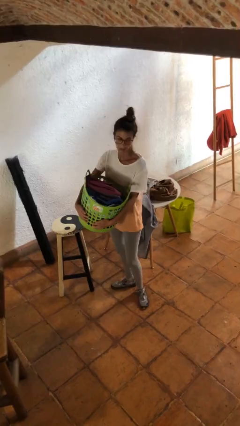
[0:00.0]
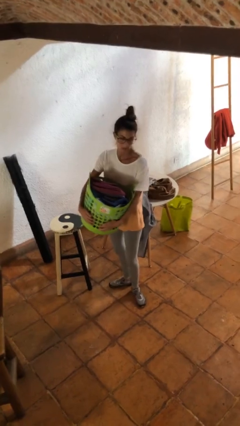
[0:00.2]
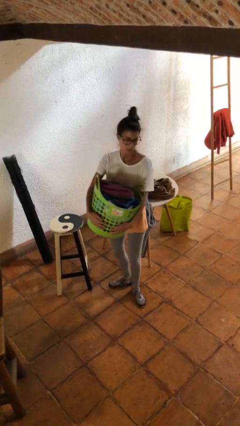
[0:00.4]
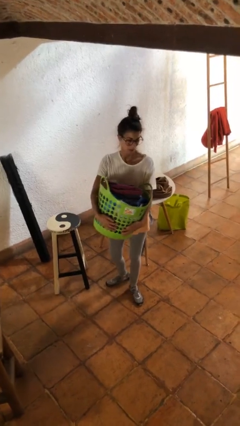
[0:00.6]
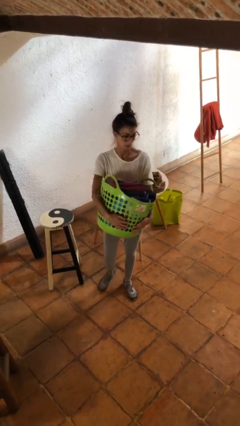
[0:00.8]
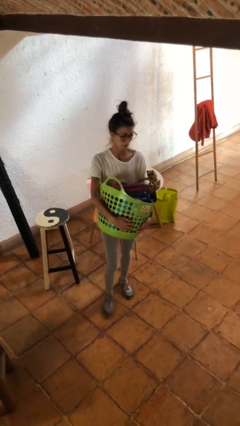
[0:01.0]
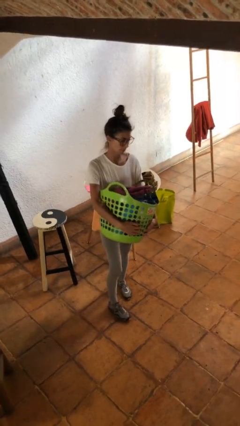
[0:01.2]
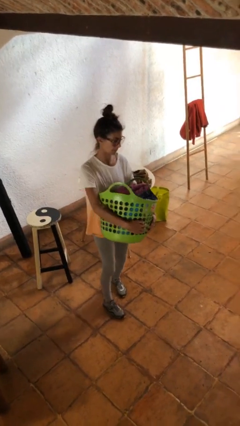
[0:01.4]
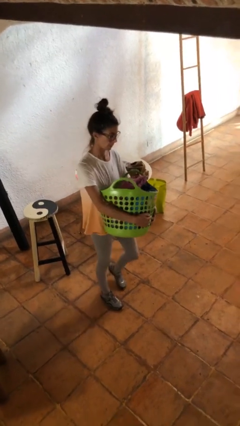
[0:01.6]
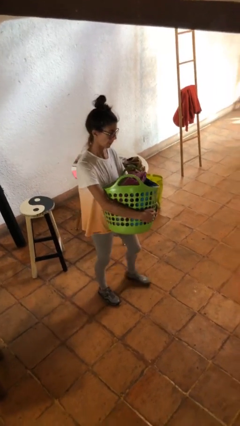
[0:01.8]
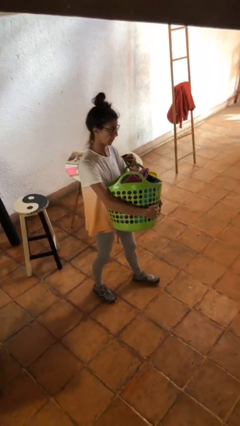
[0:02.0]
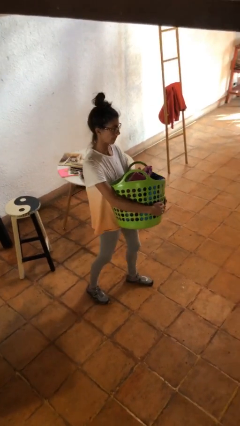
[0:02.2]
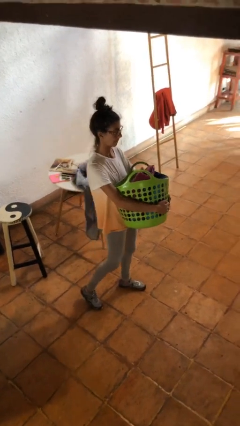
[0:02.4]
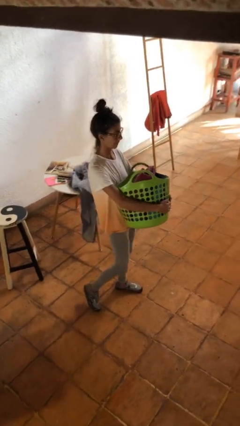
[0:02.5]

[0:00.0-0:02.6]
person carries laundry basket

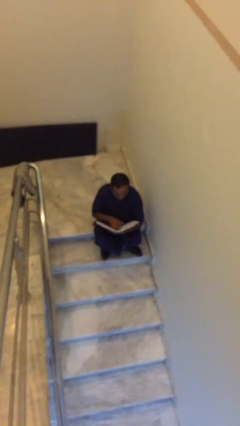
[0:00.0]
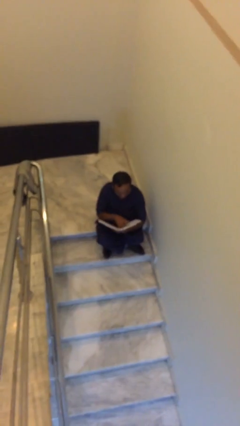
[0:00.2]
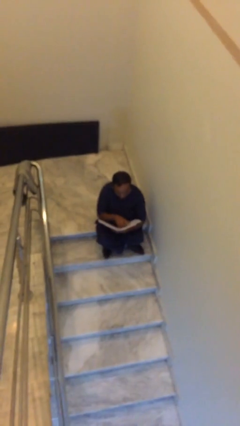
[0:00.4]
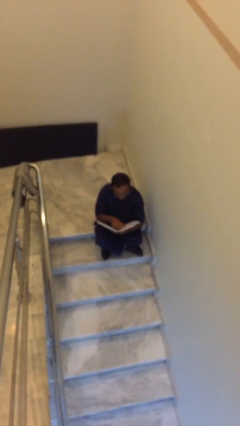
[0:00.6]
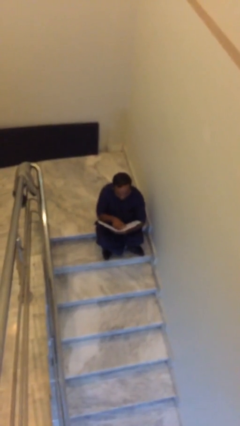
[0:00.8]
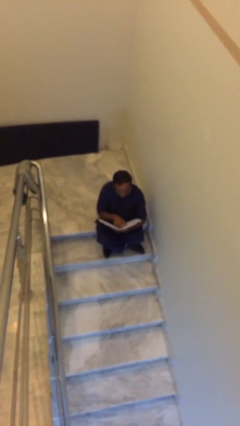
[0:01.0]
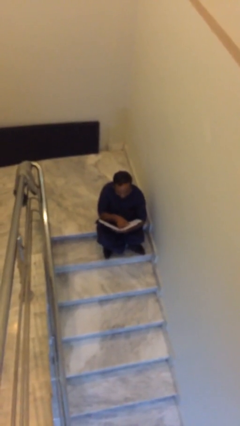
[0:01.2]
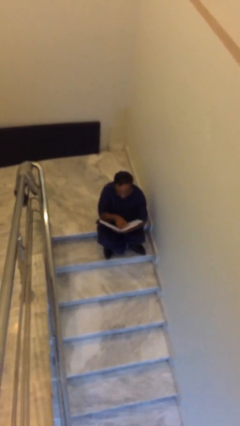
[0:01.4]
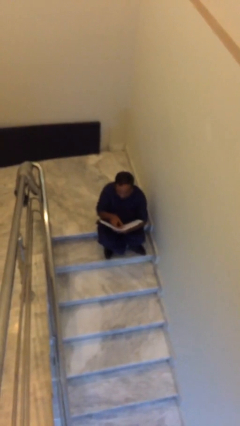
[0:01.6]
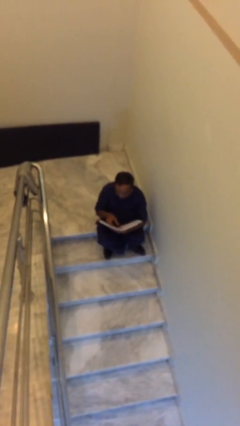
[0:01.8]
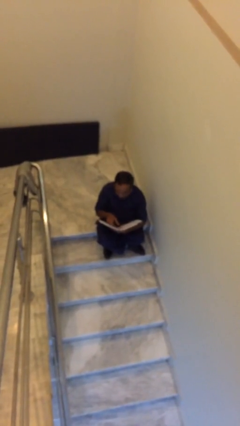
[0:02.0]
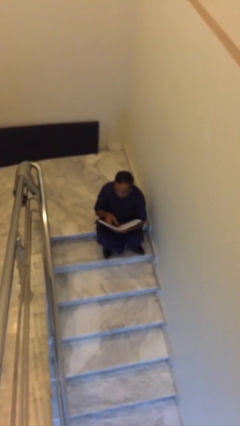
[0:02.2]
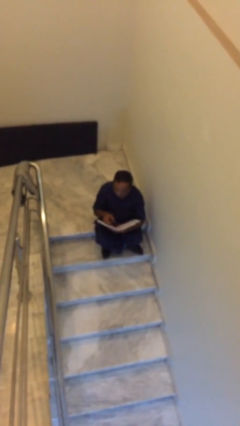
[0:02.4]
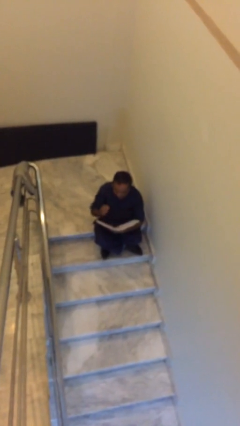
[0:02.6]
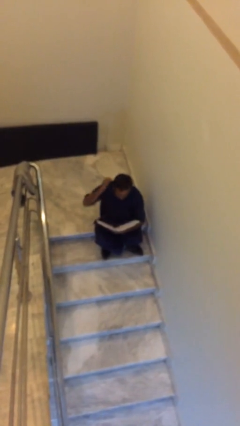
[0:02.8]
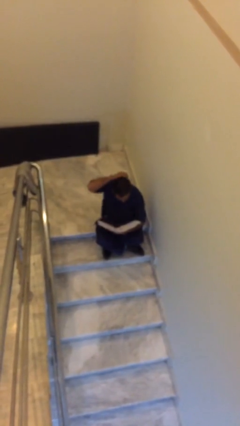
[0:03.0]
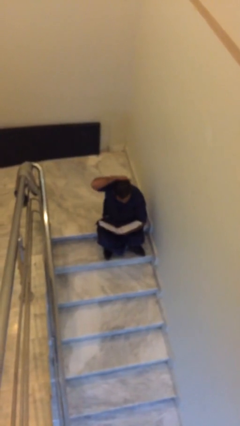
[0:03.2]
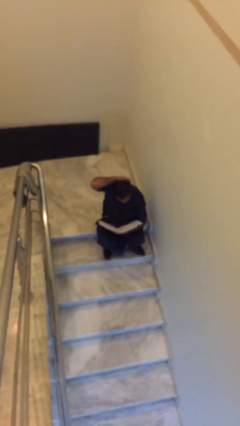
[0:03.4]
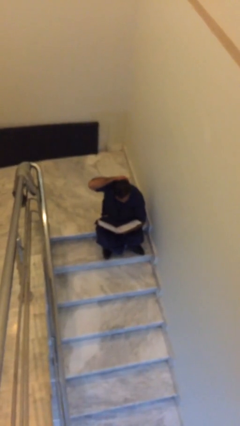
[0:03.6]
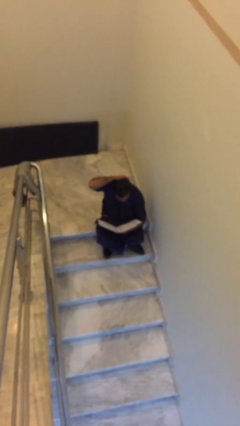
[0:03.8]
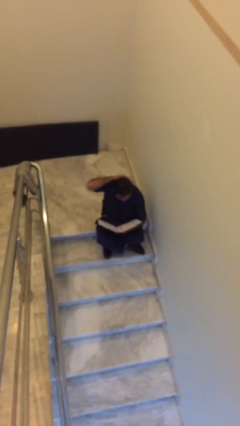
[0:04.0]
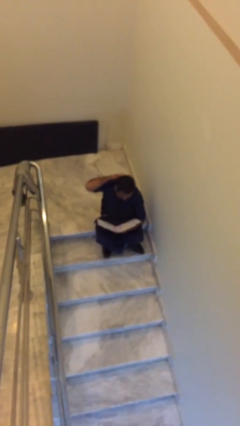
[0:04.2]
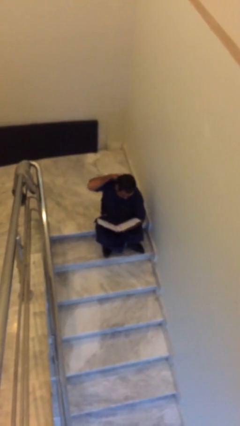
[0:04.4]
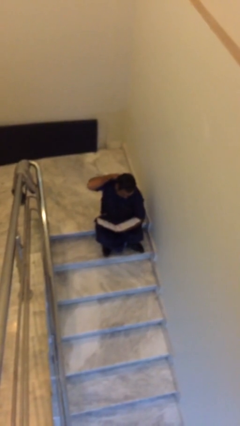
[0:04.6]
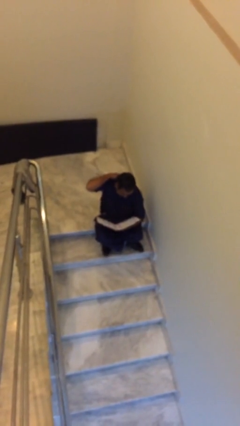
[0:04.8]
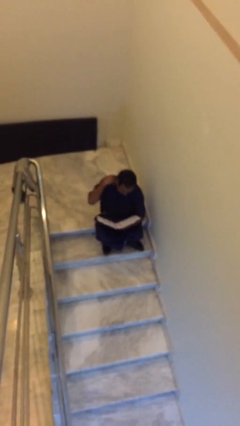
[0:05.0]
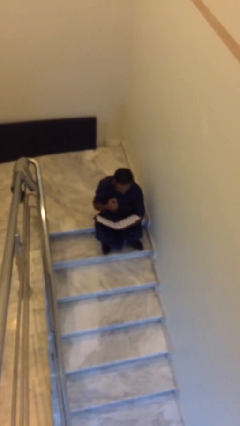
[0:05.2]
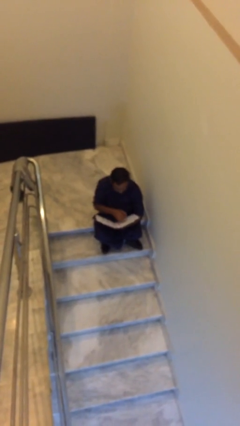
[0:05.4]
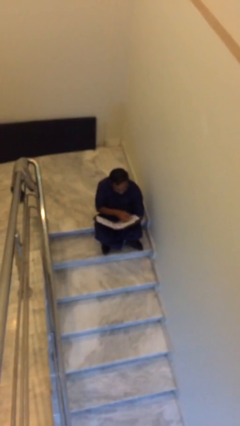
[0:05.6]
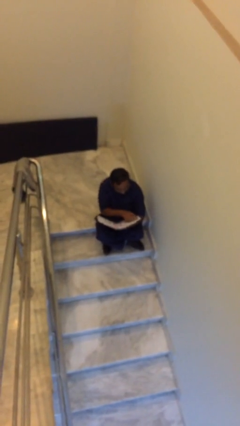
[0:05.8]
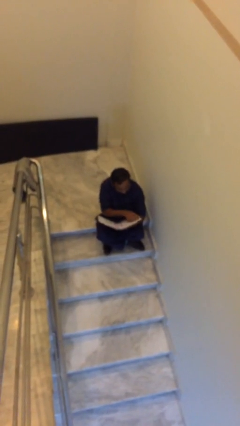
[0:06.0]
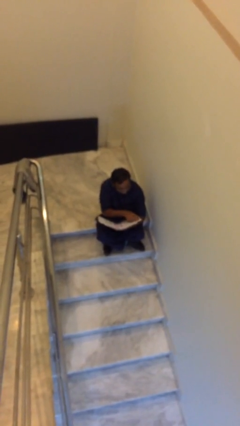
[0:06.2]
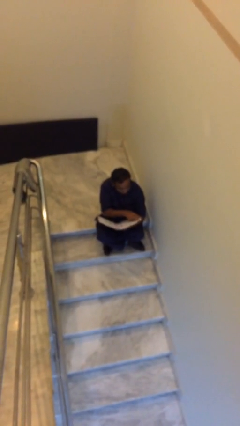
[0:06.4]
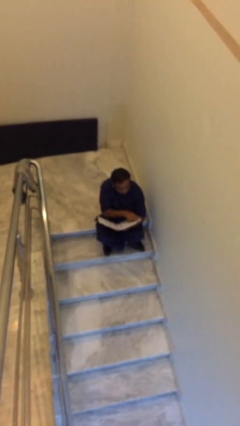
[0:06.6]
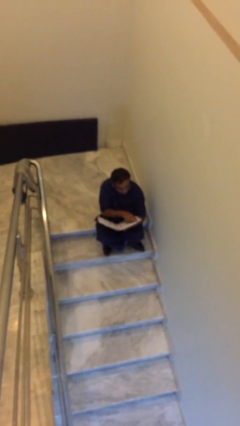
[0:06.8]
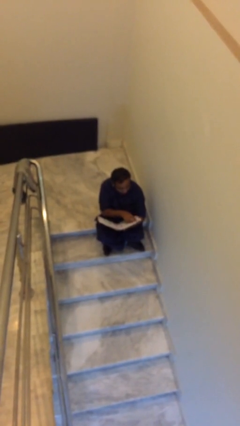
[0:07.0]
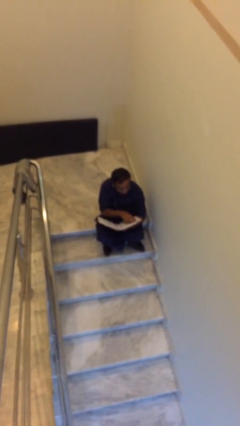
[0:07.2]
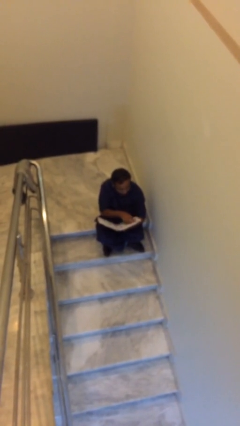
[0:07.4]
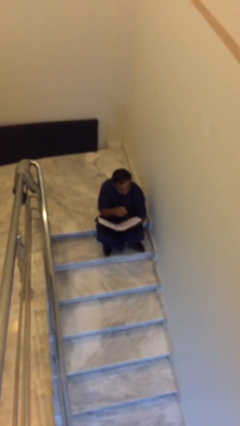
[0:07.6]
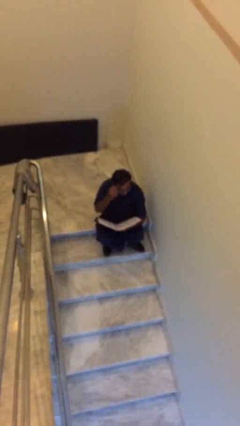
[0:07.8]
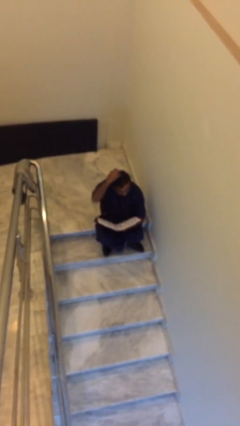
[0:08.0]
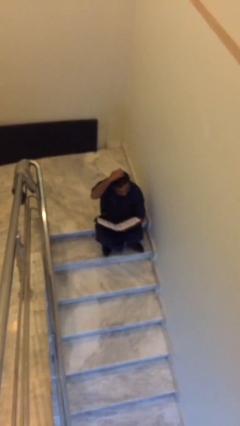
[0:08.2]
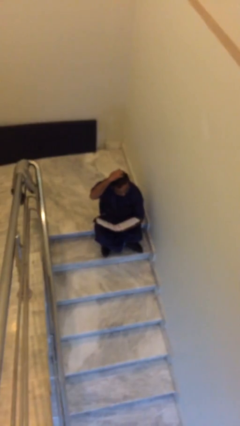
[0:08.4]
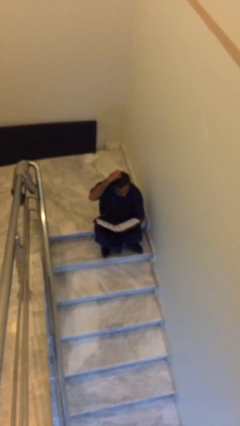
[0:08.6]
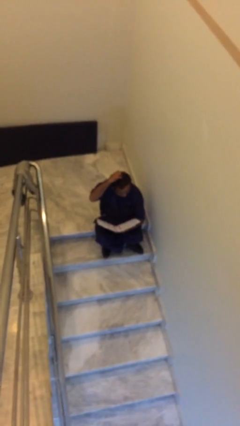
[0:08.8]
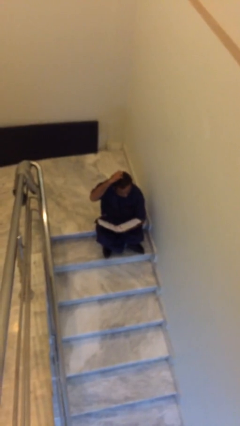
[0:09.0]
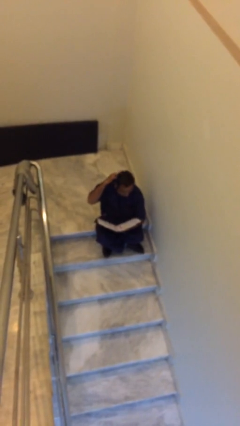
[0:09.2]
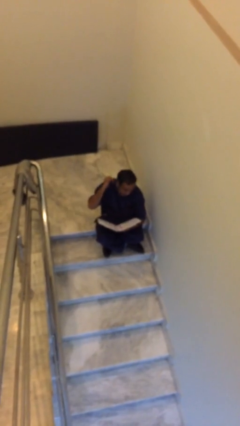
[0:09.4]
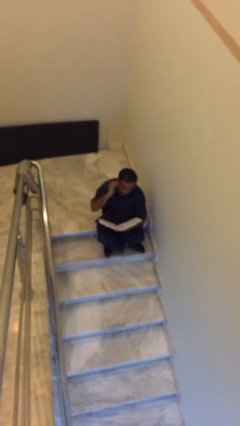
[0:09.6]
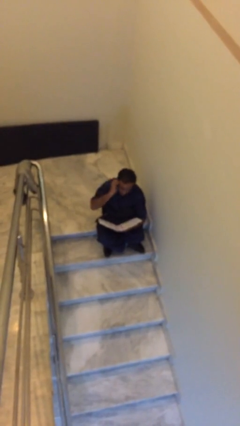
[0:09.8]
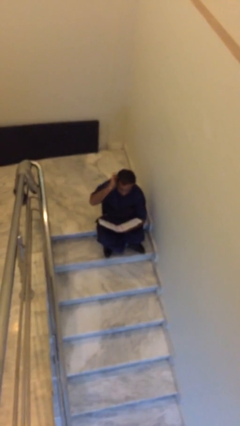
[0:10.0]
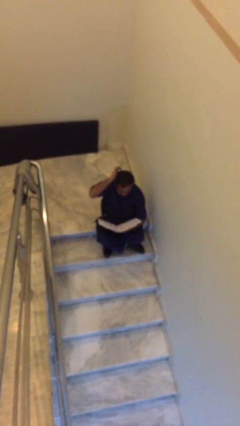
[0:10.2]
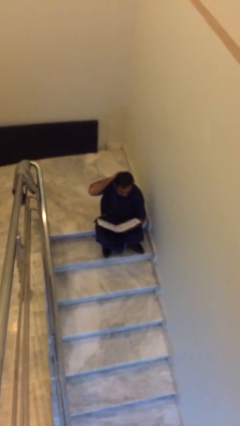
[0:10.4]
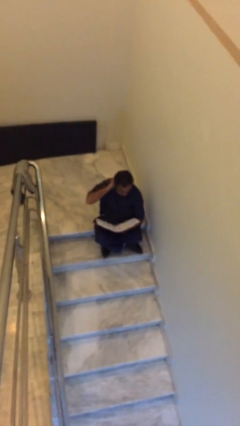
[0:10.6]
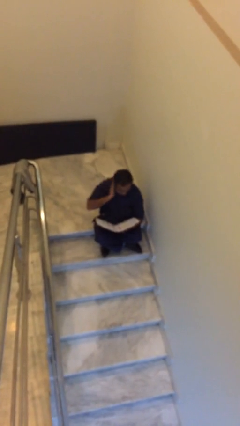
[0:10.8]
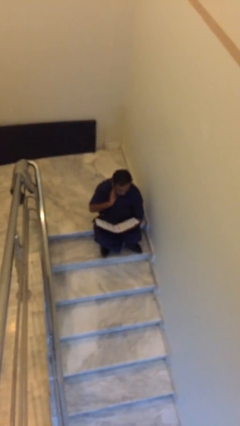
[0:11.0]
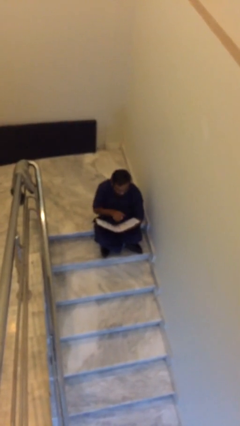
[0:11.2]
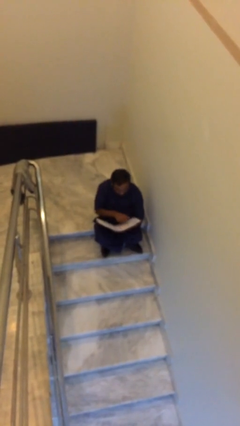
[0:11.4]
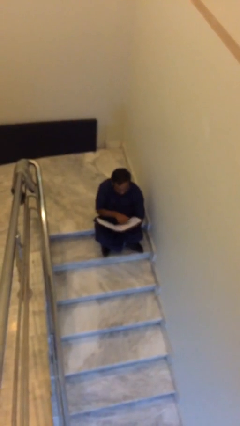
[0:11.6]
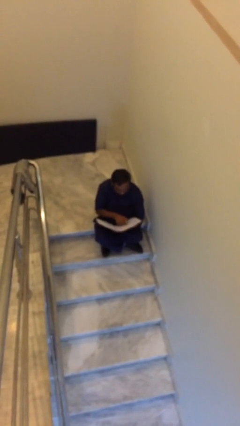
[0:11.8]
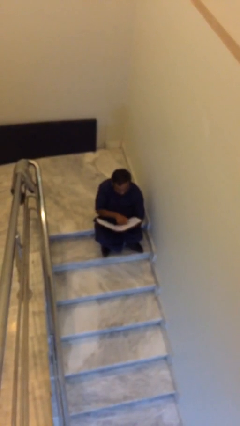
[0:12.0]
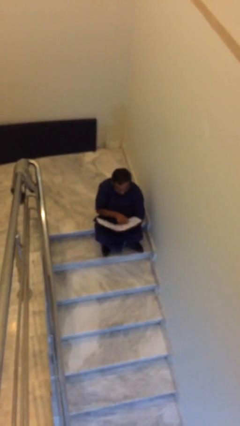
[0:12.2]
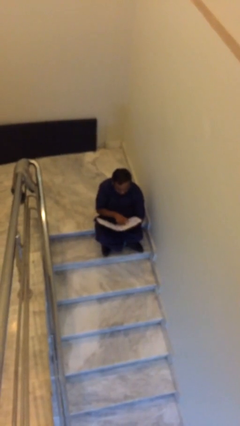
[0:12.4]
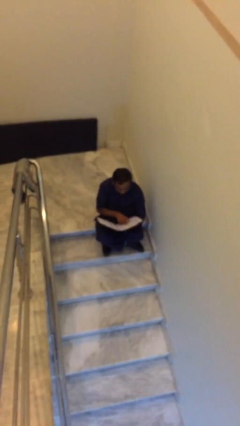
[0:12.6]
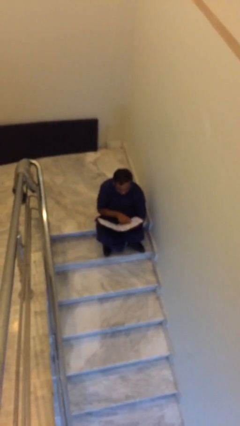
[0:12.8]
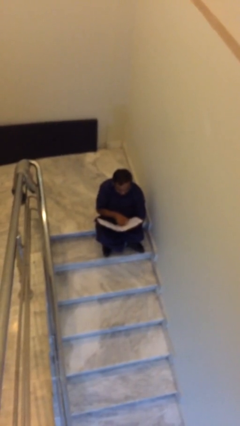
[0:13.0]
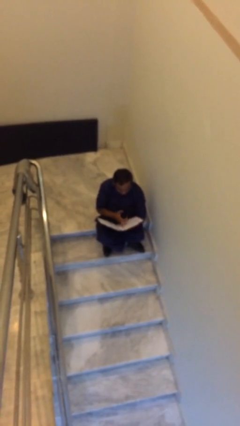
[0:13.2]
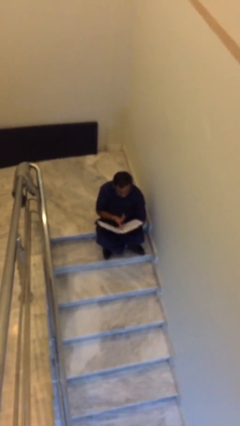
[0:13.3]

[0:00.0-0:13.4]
person reads document

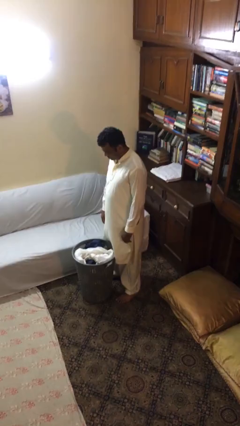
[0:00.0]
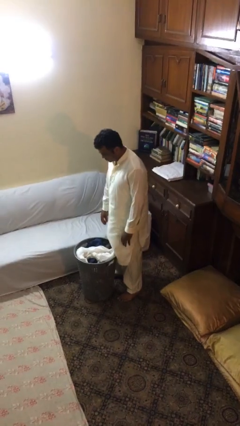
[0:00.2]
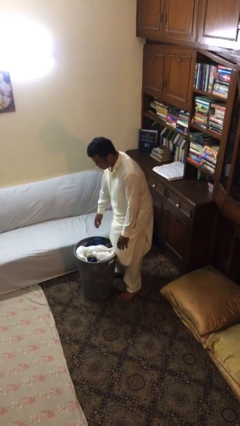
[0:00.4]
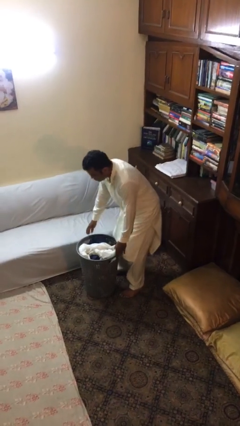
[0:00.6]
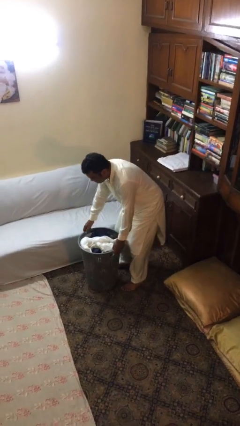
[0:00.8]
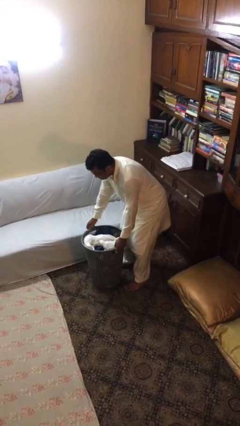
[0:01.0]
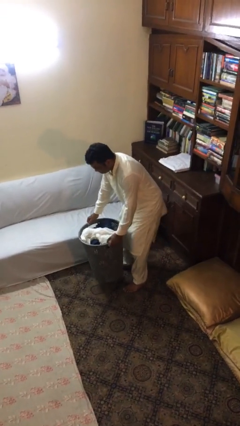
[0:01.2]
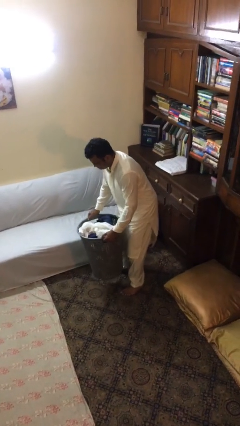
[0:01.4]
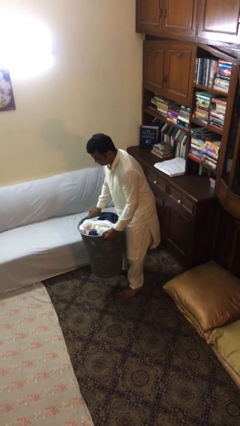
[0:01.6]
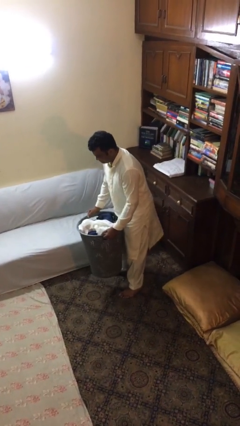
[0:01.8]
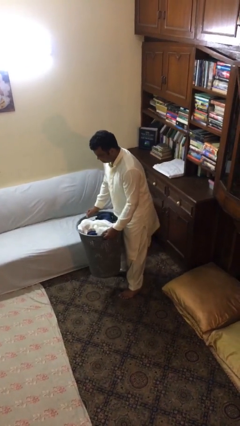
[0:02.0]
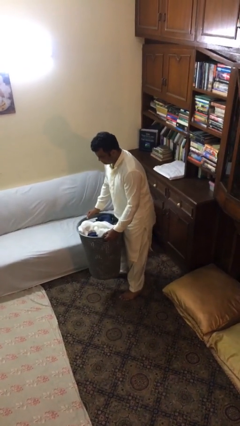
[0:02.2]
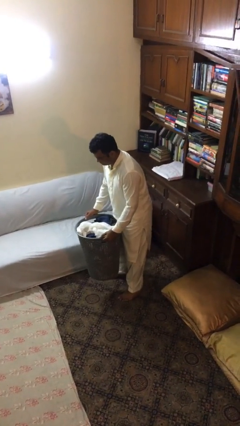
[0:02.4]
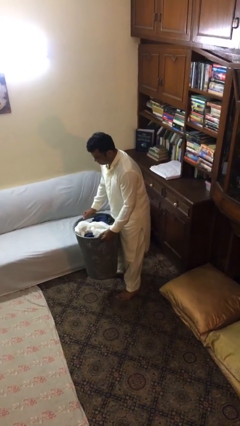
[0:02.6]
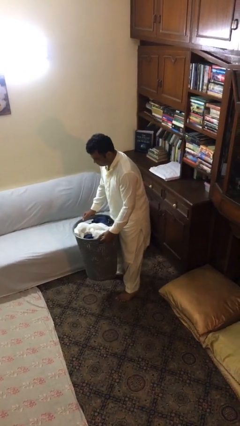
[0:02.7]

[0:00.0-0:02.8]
person picks up object from floor
